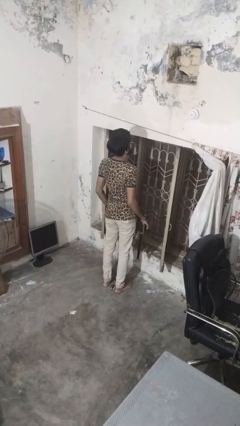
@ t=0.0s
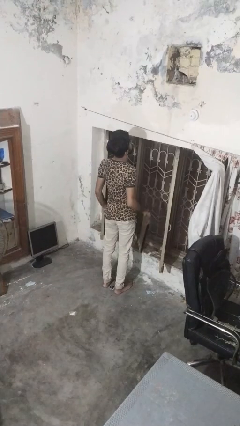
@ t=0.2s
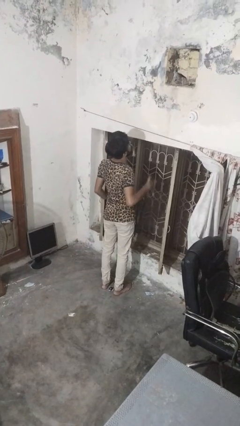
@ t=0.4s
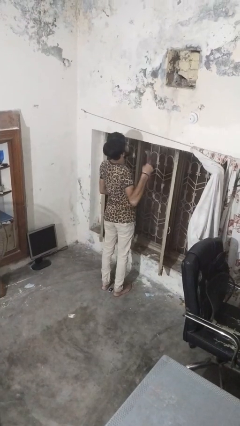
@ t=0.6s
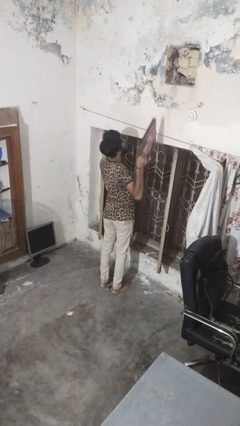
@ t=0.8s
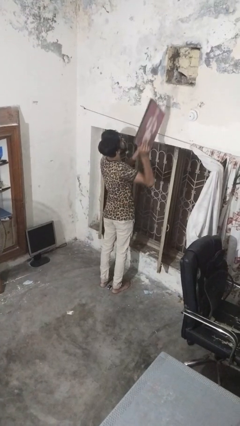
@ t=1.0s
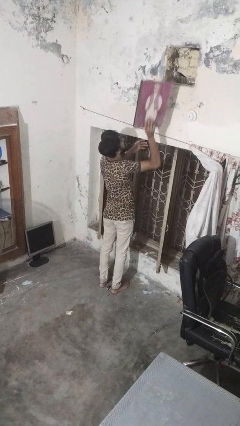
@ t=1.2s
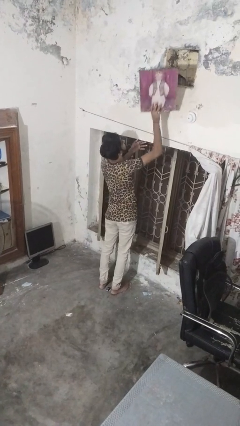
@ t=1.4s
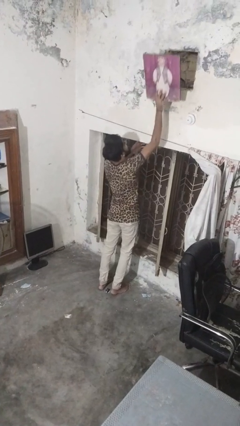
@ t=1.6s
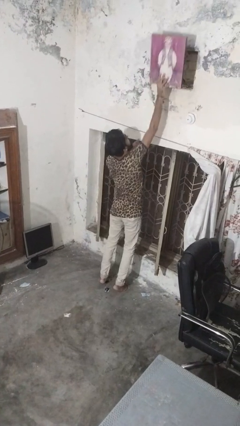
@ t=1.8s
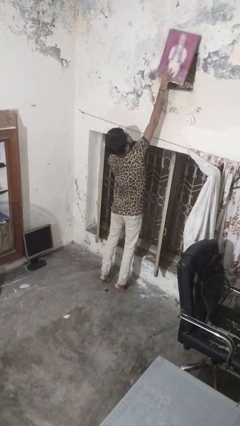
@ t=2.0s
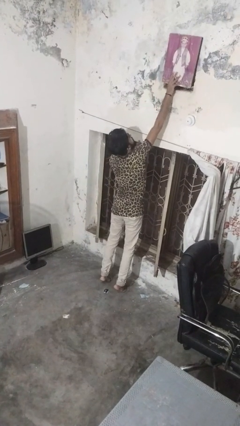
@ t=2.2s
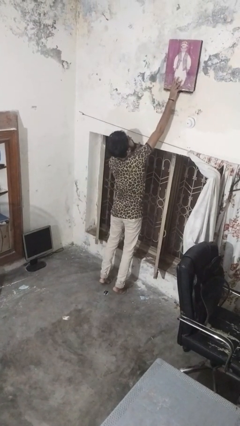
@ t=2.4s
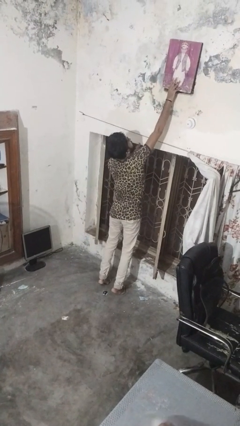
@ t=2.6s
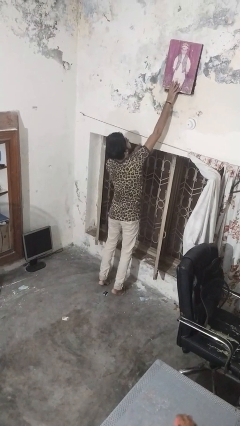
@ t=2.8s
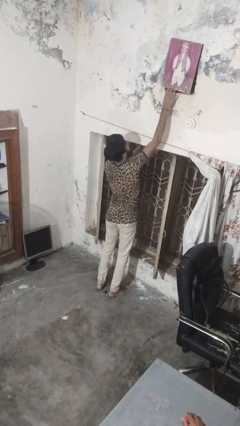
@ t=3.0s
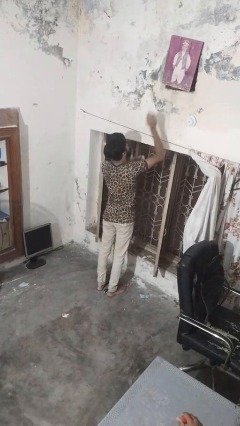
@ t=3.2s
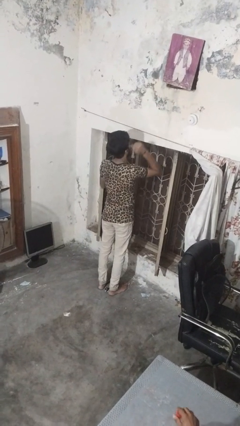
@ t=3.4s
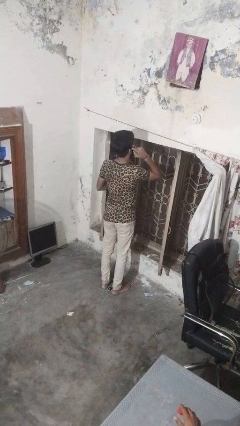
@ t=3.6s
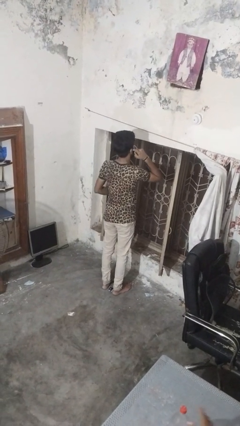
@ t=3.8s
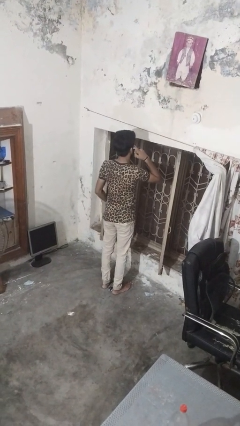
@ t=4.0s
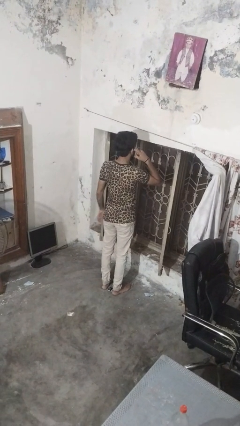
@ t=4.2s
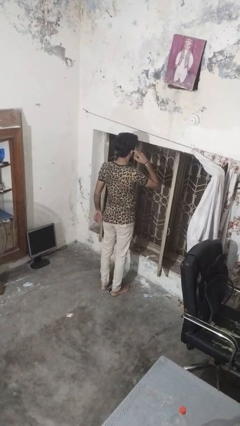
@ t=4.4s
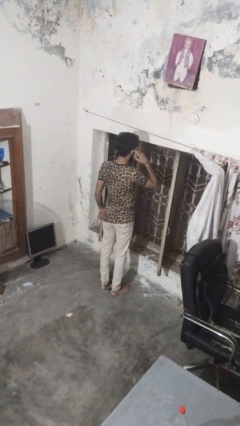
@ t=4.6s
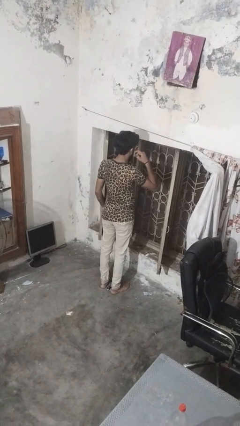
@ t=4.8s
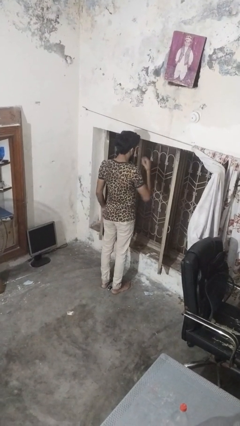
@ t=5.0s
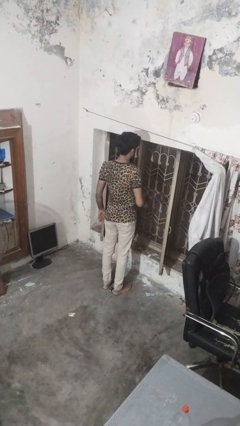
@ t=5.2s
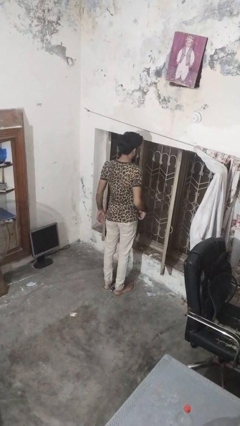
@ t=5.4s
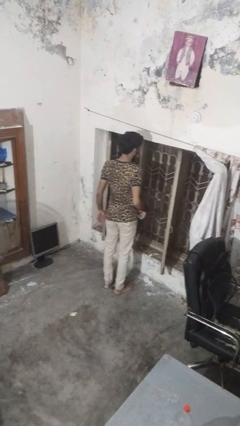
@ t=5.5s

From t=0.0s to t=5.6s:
person puts up picture frame

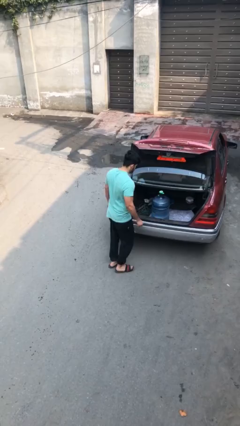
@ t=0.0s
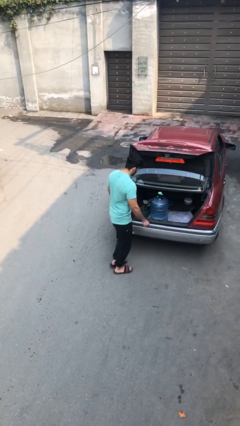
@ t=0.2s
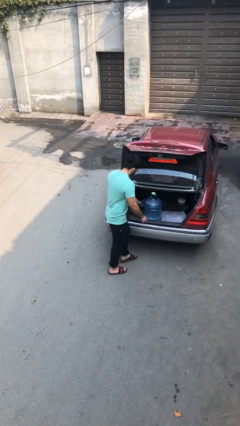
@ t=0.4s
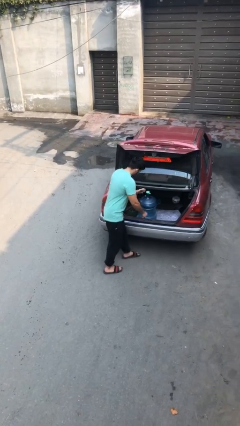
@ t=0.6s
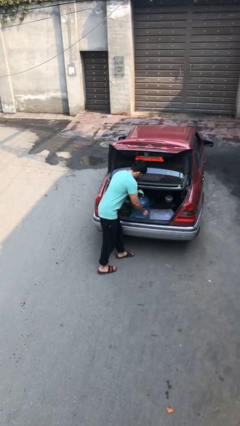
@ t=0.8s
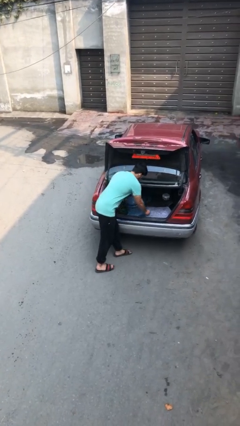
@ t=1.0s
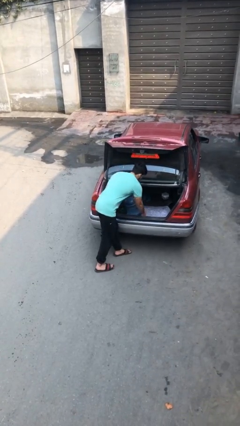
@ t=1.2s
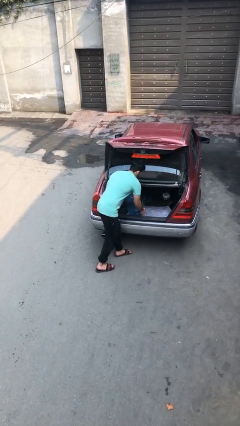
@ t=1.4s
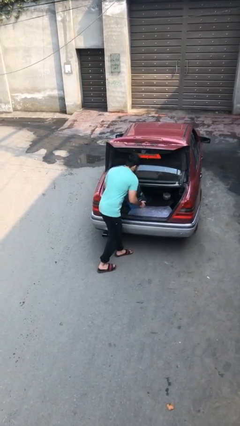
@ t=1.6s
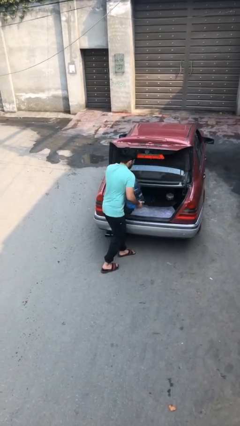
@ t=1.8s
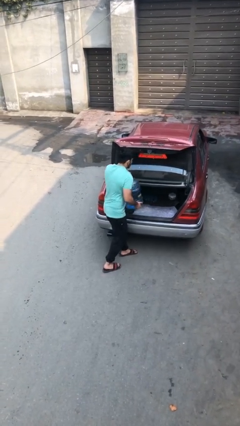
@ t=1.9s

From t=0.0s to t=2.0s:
person unloads car

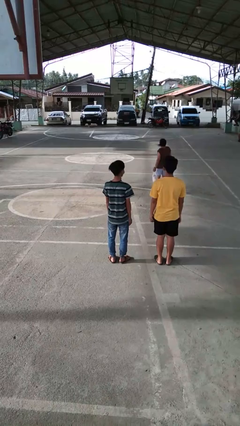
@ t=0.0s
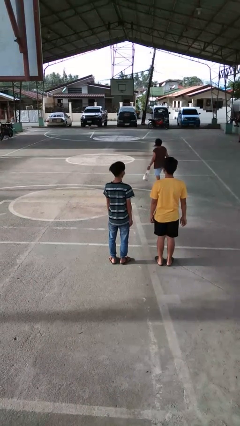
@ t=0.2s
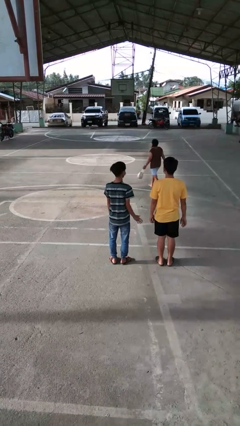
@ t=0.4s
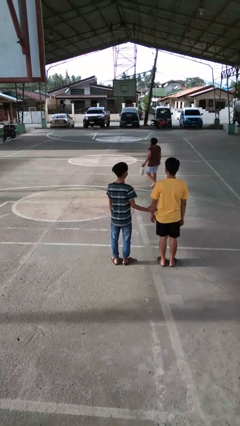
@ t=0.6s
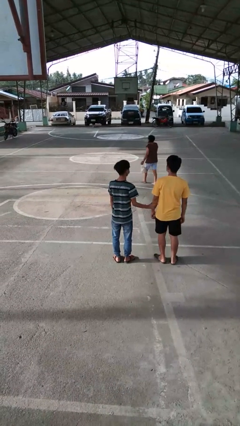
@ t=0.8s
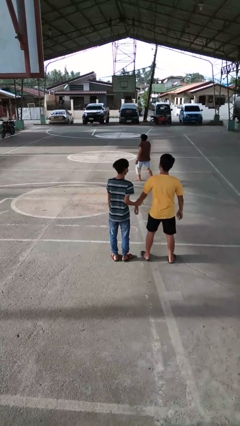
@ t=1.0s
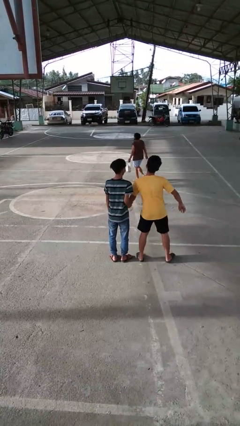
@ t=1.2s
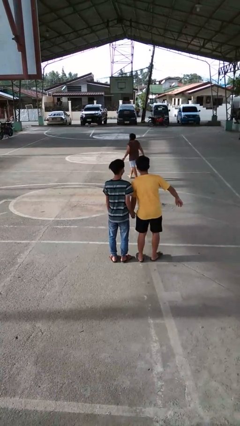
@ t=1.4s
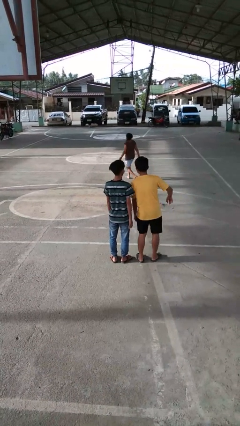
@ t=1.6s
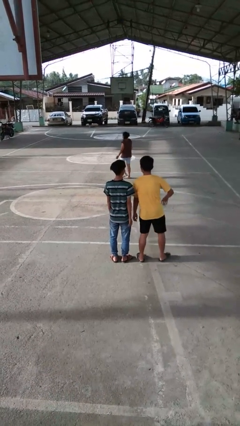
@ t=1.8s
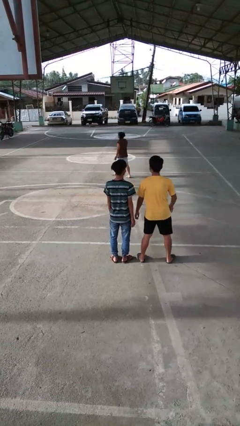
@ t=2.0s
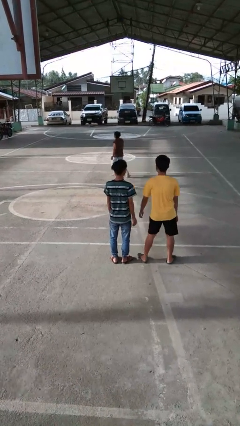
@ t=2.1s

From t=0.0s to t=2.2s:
person grabs person by forearm

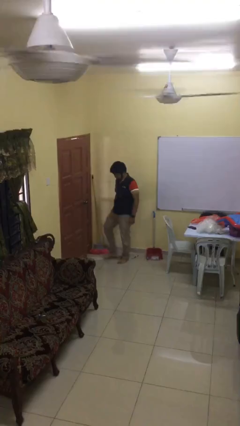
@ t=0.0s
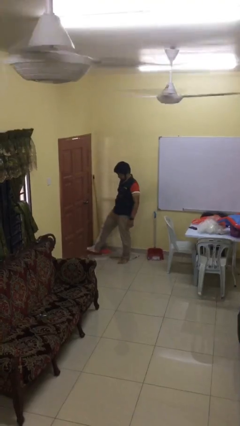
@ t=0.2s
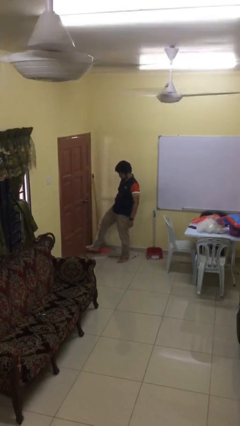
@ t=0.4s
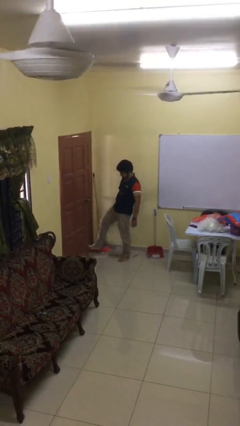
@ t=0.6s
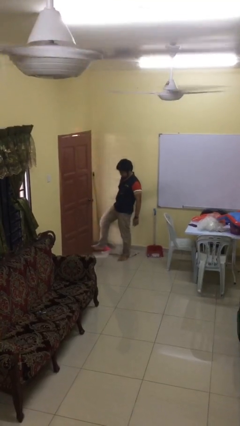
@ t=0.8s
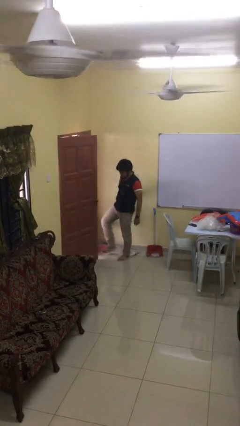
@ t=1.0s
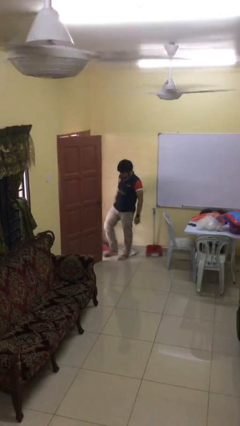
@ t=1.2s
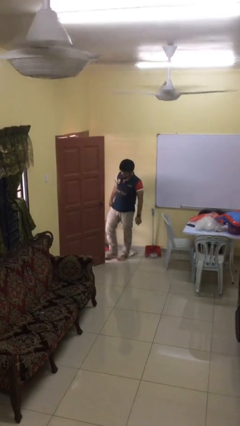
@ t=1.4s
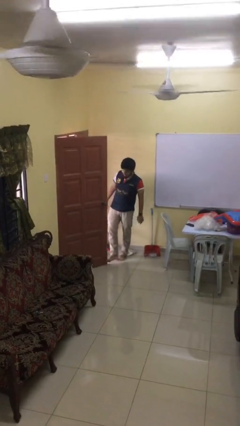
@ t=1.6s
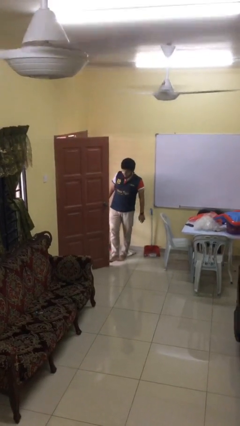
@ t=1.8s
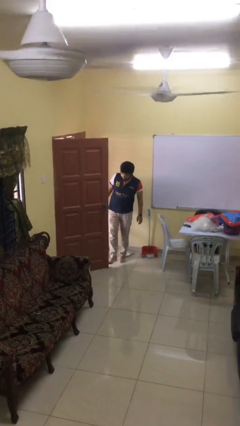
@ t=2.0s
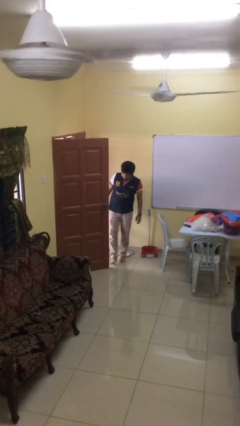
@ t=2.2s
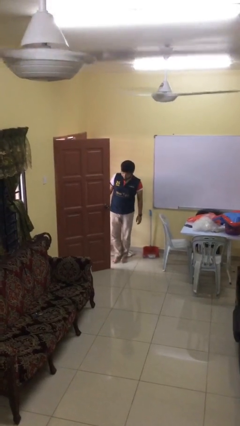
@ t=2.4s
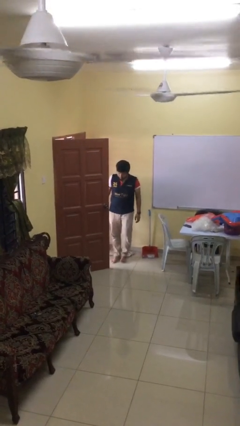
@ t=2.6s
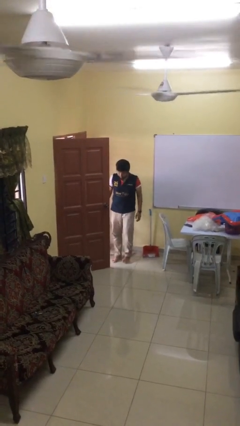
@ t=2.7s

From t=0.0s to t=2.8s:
person opens facility door

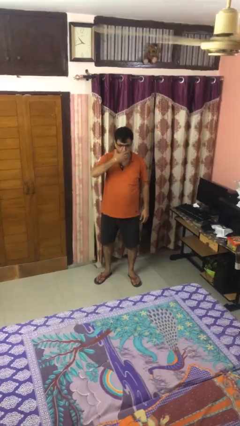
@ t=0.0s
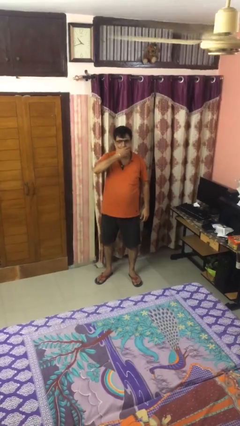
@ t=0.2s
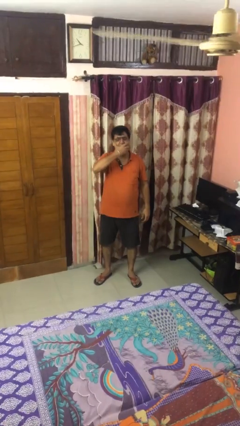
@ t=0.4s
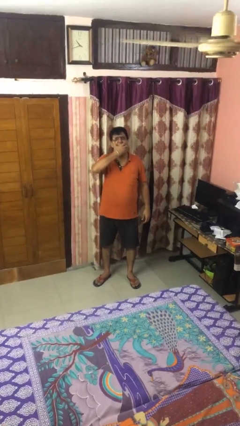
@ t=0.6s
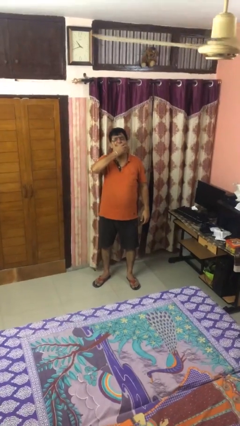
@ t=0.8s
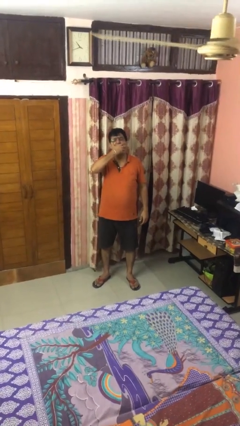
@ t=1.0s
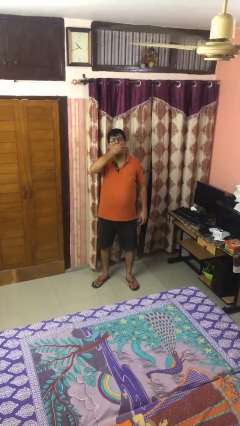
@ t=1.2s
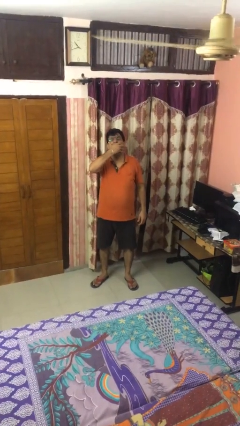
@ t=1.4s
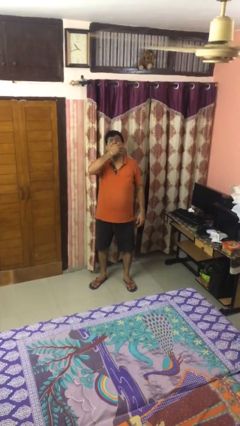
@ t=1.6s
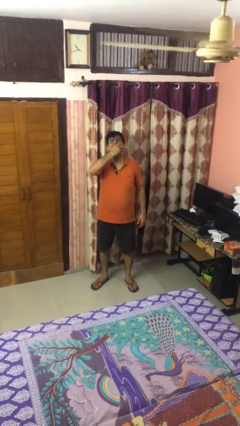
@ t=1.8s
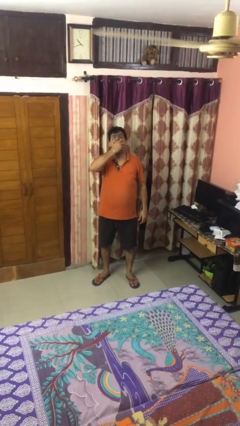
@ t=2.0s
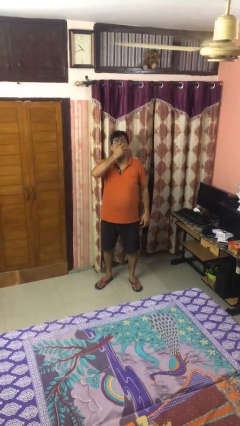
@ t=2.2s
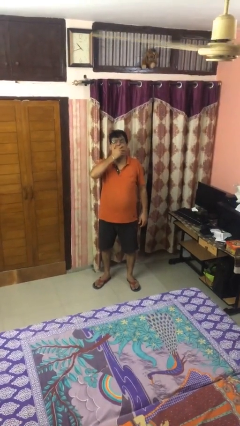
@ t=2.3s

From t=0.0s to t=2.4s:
person yawns

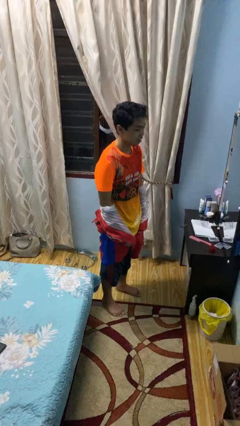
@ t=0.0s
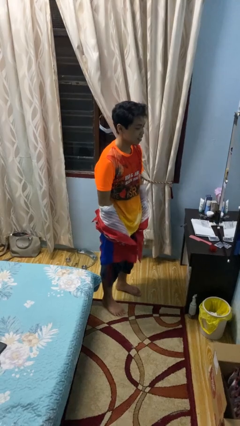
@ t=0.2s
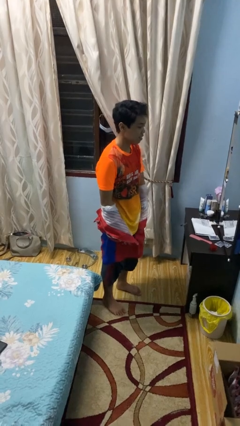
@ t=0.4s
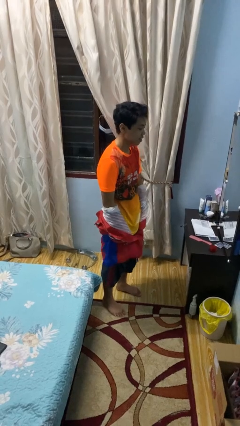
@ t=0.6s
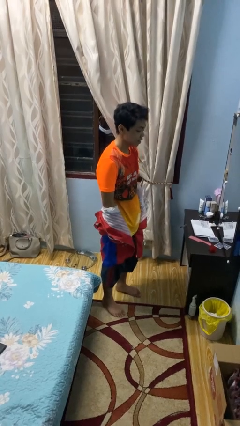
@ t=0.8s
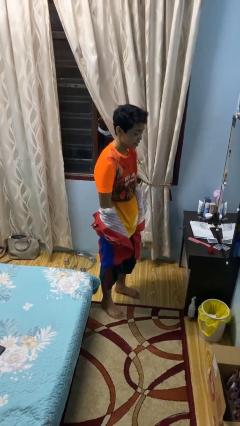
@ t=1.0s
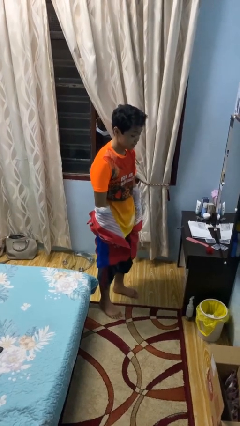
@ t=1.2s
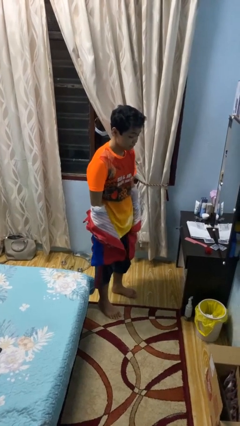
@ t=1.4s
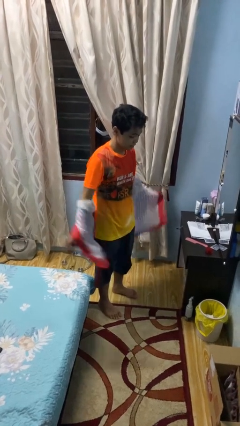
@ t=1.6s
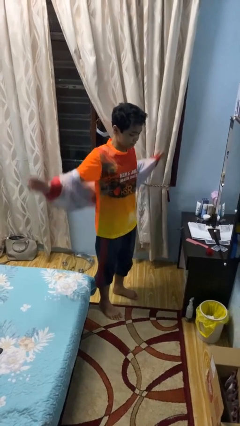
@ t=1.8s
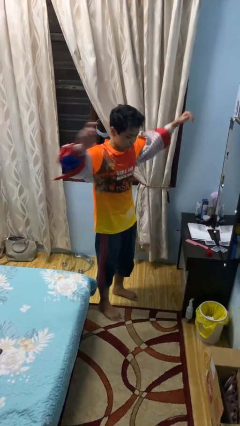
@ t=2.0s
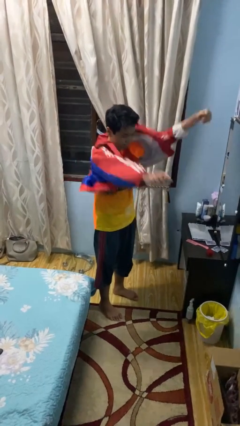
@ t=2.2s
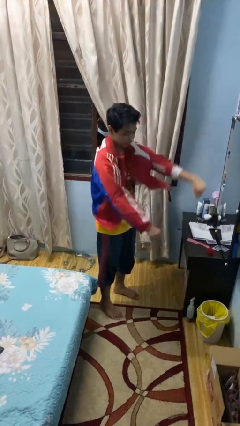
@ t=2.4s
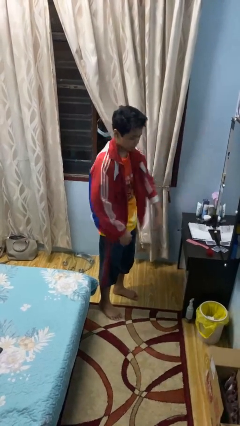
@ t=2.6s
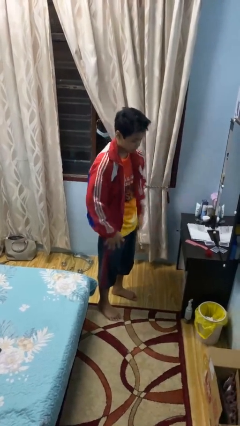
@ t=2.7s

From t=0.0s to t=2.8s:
person puts on jacket
